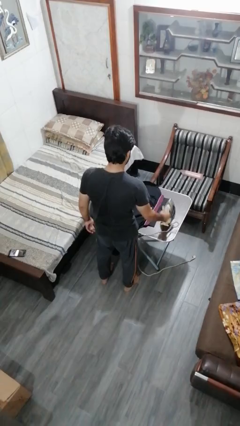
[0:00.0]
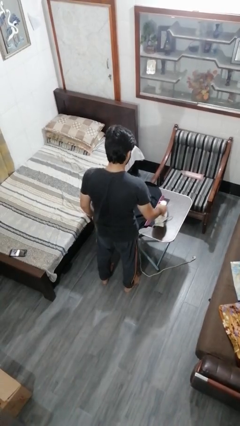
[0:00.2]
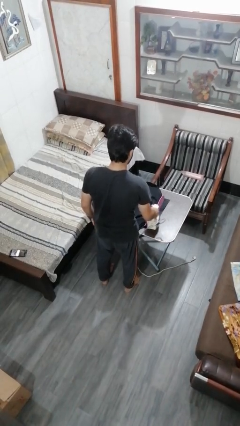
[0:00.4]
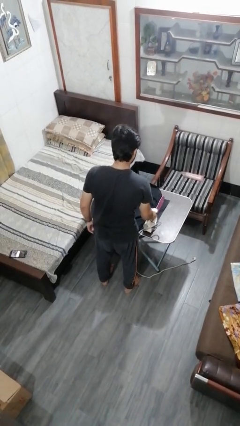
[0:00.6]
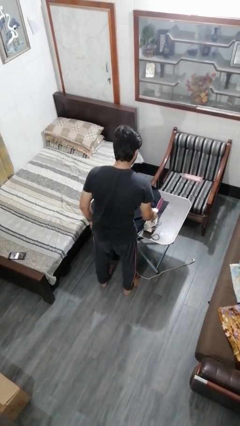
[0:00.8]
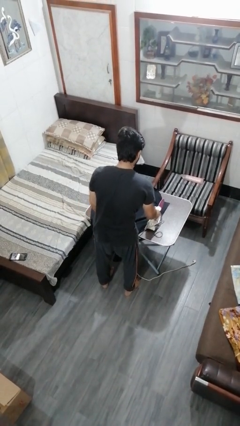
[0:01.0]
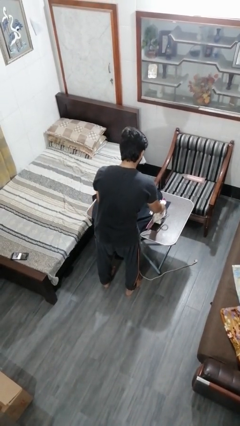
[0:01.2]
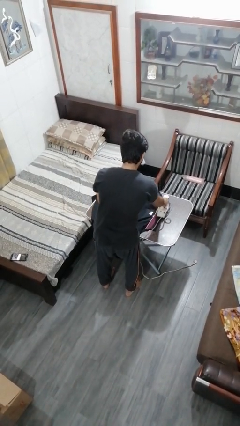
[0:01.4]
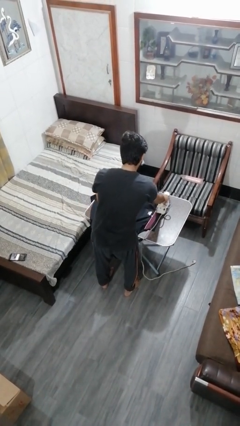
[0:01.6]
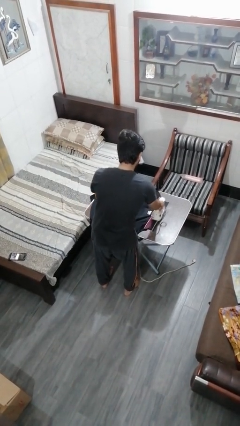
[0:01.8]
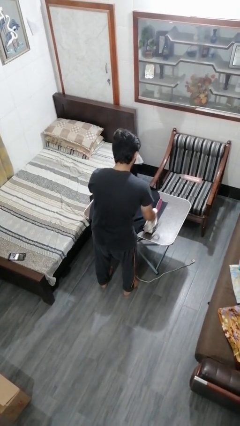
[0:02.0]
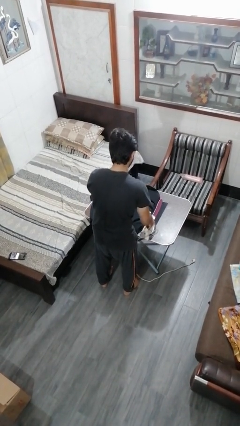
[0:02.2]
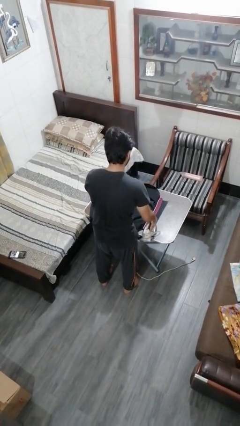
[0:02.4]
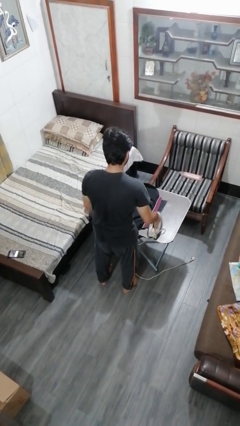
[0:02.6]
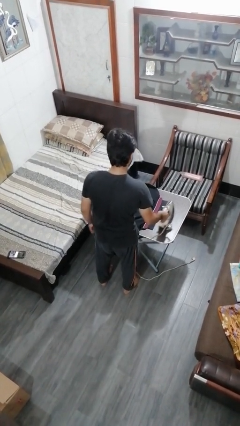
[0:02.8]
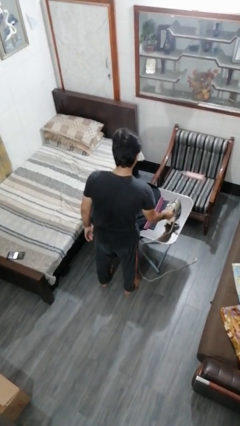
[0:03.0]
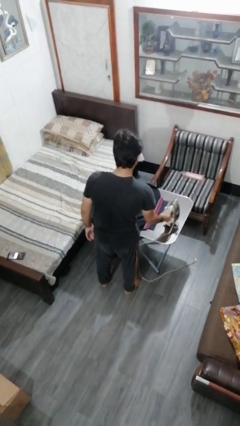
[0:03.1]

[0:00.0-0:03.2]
person irons clothes

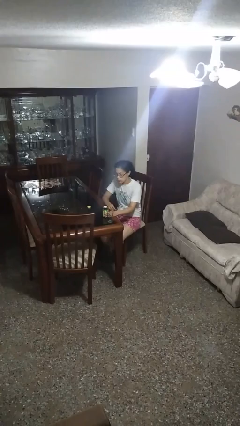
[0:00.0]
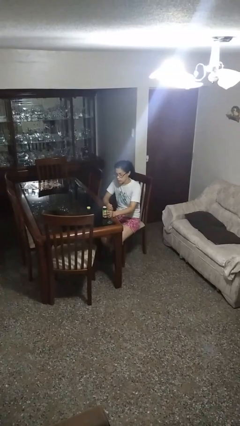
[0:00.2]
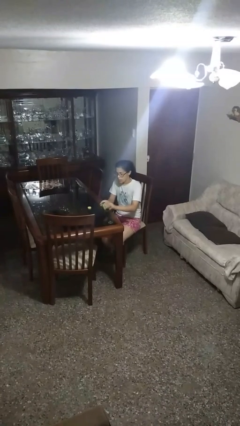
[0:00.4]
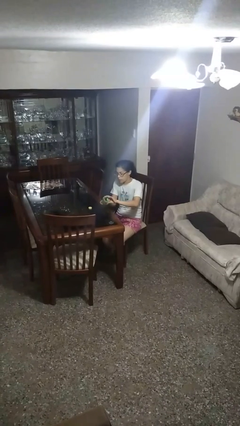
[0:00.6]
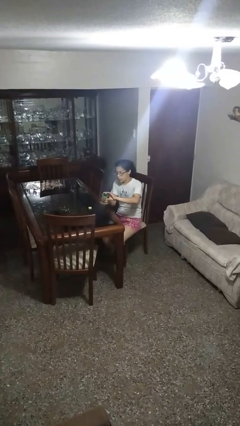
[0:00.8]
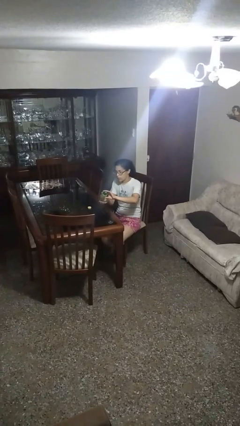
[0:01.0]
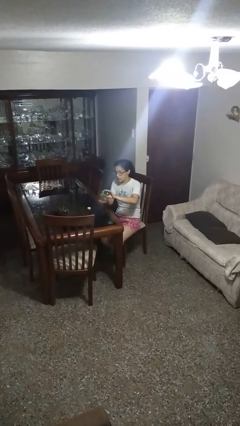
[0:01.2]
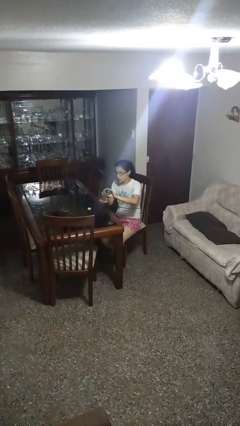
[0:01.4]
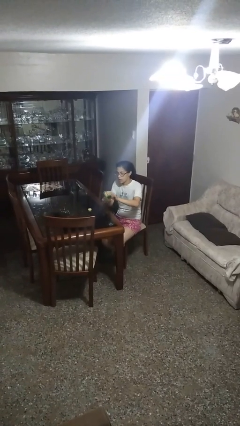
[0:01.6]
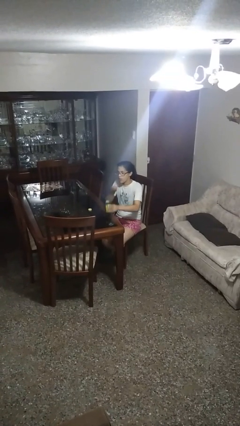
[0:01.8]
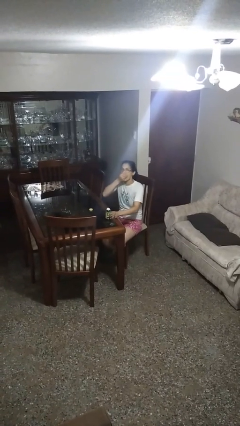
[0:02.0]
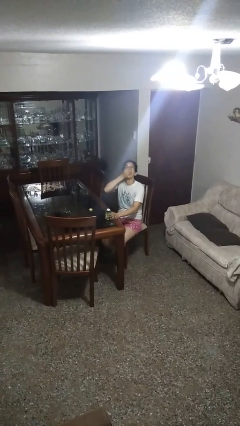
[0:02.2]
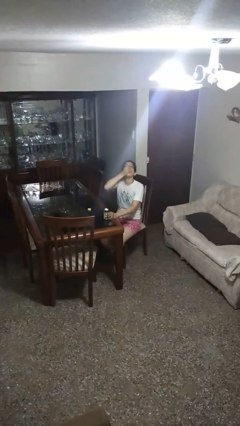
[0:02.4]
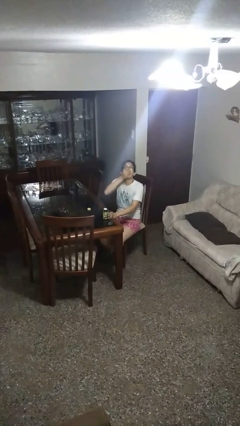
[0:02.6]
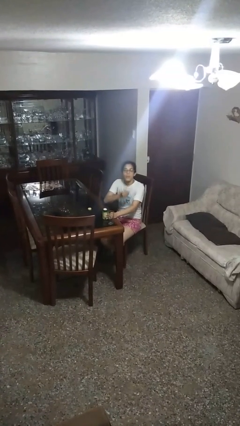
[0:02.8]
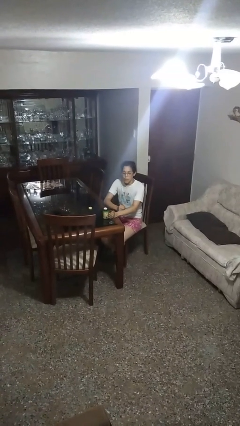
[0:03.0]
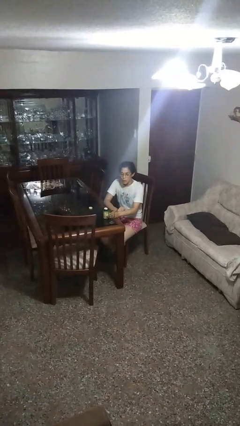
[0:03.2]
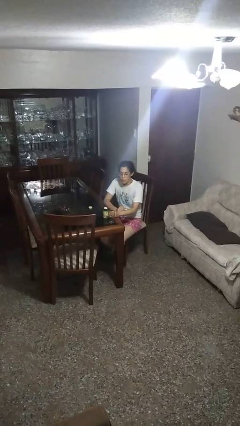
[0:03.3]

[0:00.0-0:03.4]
person takes medicine pills

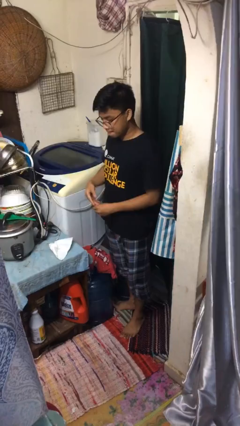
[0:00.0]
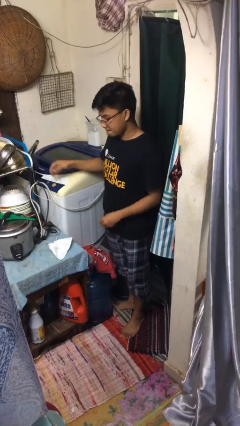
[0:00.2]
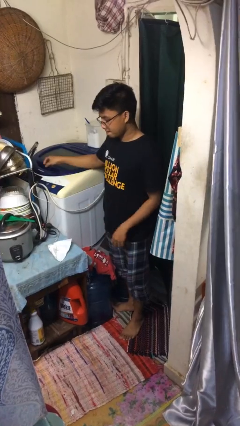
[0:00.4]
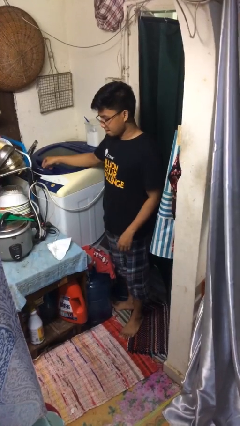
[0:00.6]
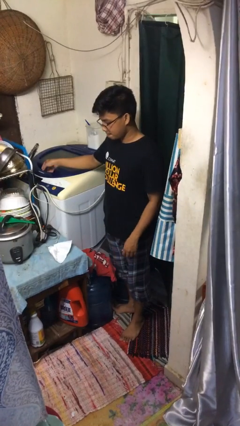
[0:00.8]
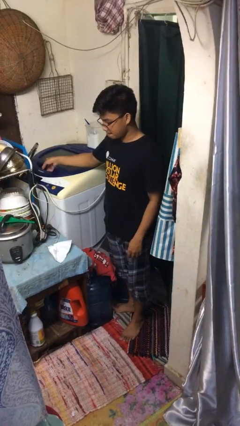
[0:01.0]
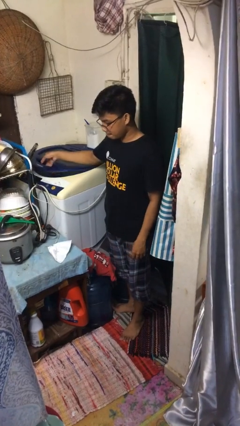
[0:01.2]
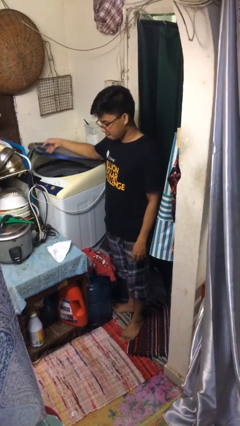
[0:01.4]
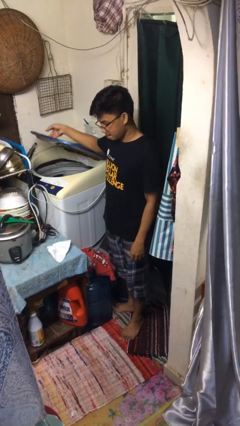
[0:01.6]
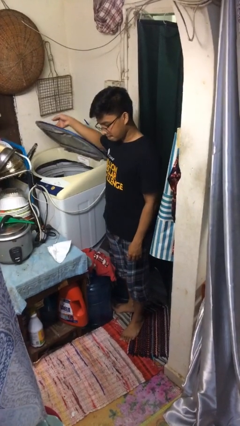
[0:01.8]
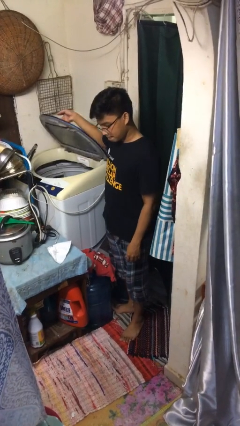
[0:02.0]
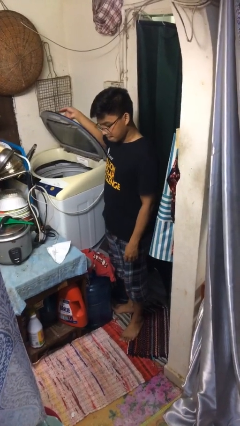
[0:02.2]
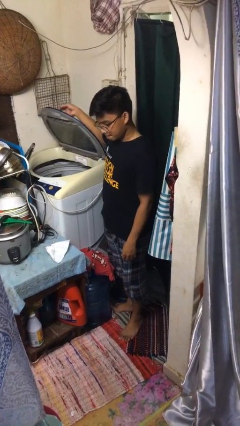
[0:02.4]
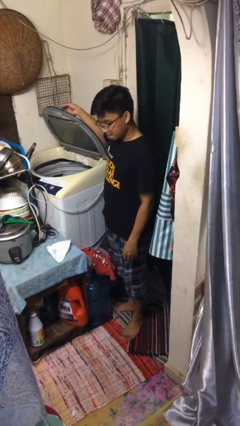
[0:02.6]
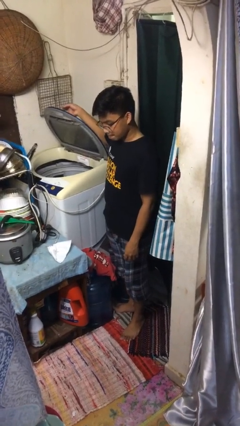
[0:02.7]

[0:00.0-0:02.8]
person opens clothes washer

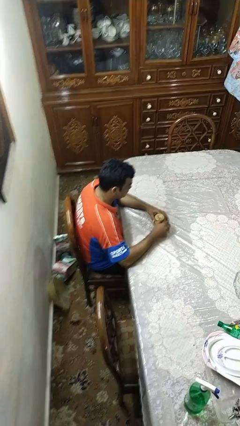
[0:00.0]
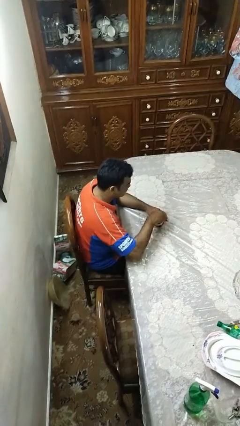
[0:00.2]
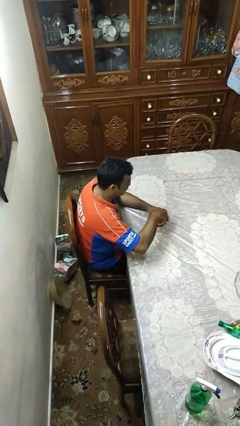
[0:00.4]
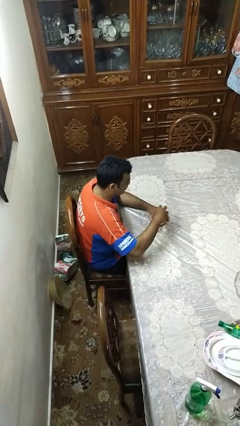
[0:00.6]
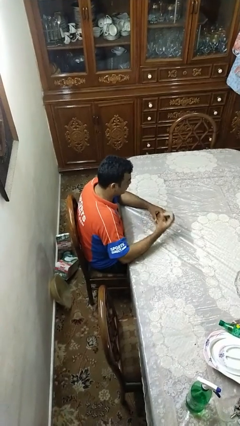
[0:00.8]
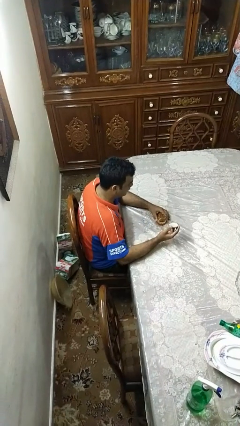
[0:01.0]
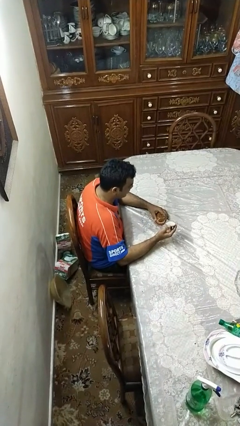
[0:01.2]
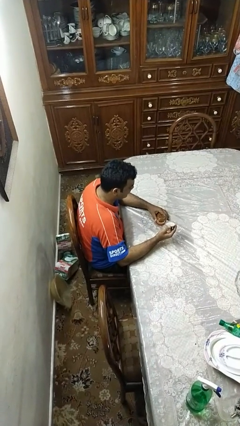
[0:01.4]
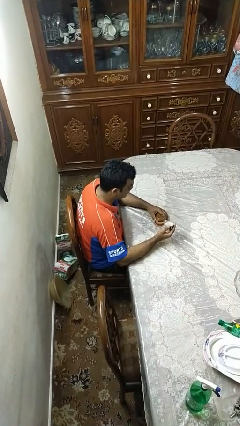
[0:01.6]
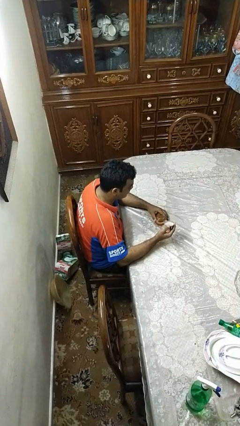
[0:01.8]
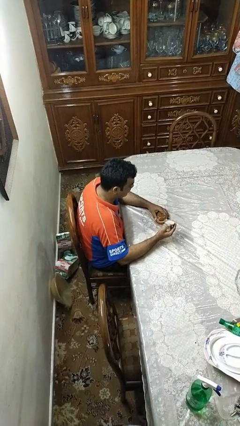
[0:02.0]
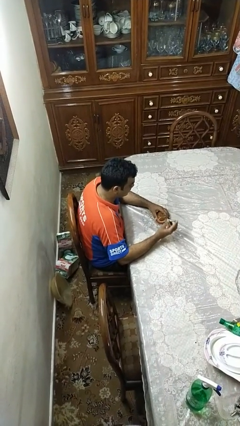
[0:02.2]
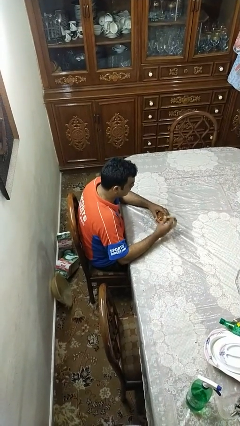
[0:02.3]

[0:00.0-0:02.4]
person opens jar

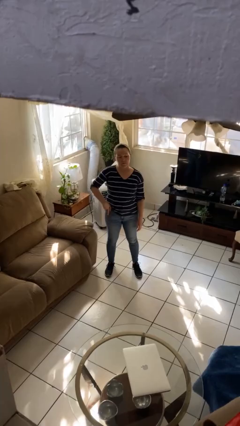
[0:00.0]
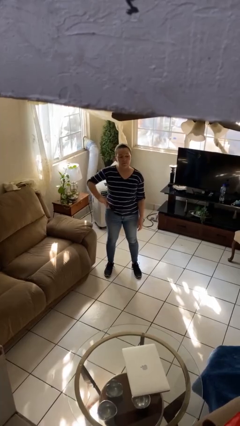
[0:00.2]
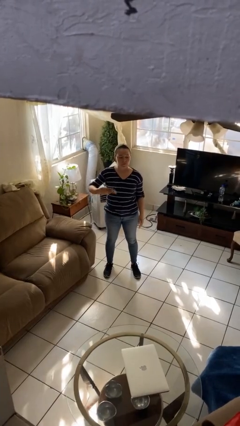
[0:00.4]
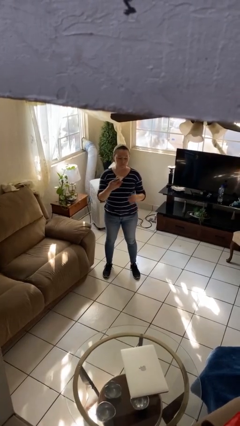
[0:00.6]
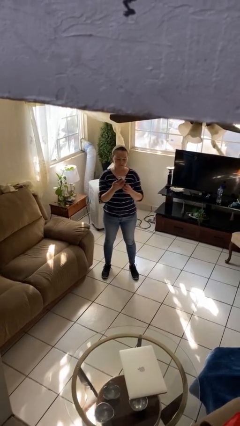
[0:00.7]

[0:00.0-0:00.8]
person takes phone from pocket

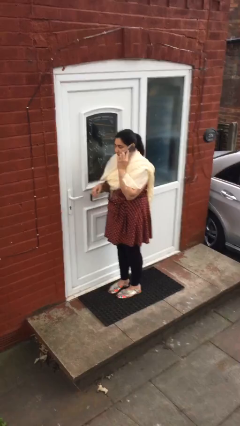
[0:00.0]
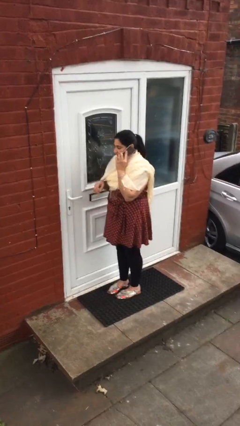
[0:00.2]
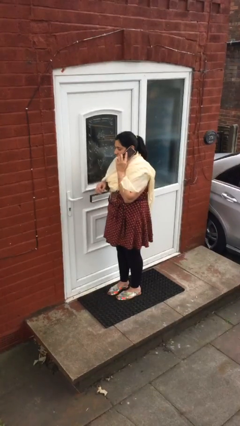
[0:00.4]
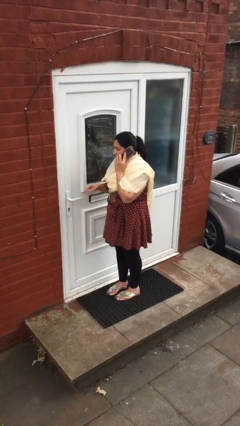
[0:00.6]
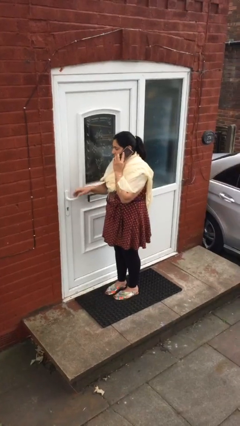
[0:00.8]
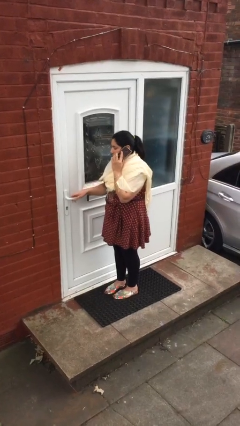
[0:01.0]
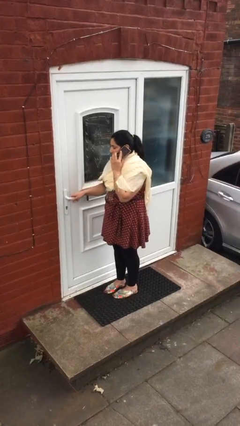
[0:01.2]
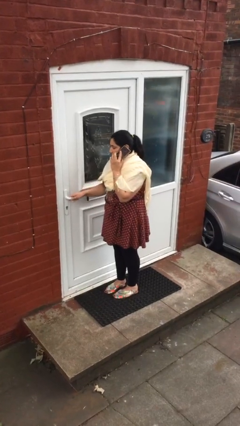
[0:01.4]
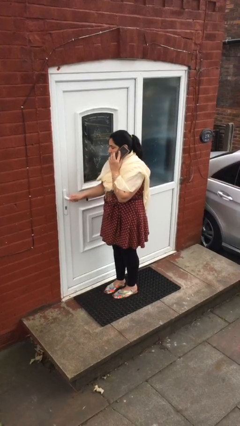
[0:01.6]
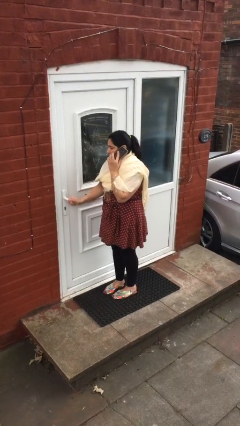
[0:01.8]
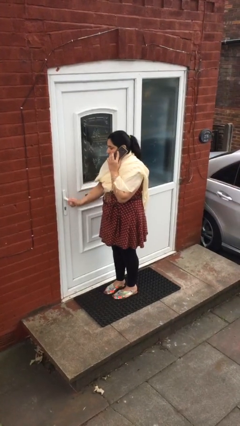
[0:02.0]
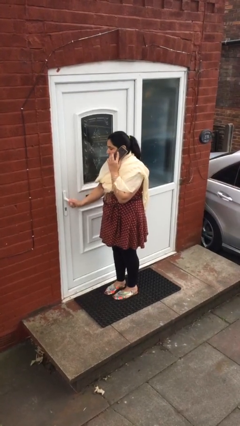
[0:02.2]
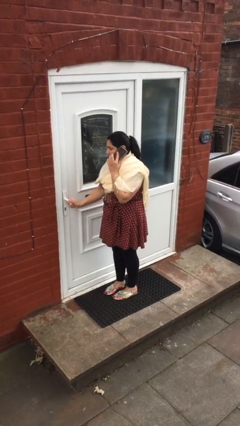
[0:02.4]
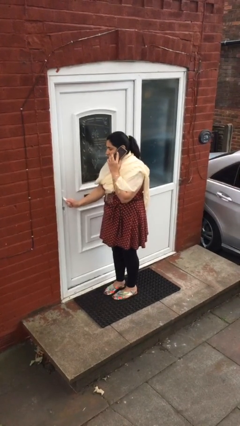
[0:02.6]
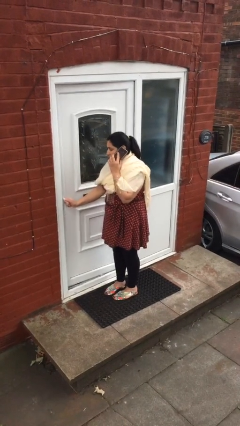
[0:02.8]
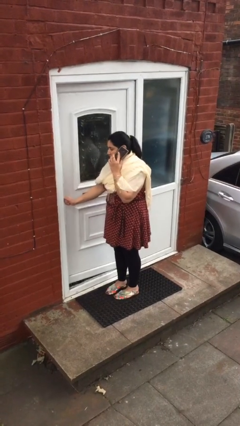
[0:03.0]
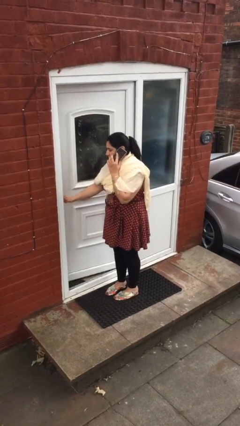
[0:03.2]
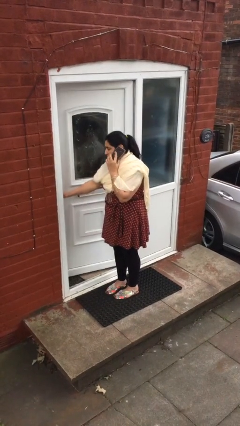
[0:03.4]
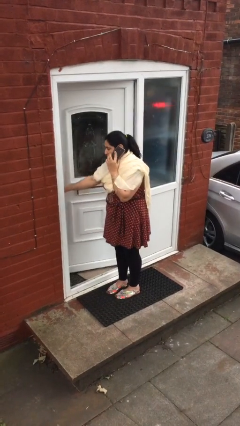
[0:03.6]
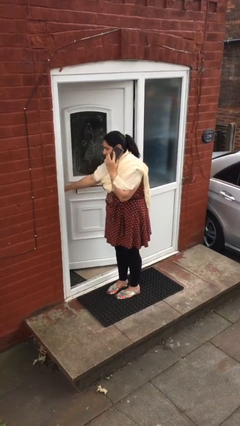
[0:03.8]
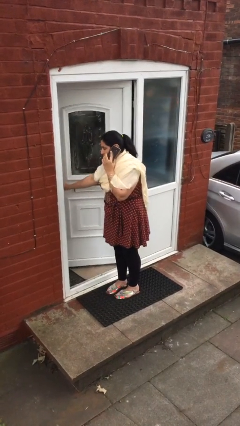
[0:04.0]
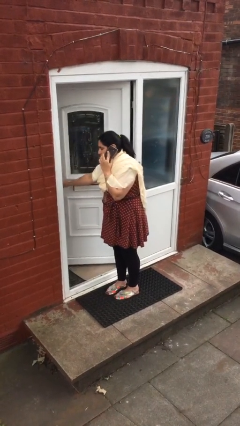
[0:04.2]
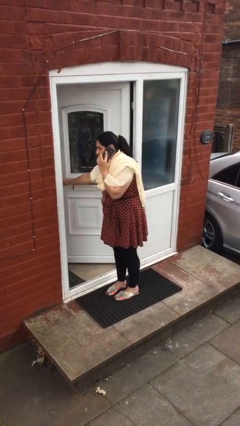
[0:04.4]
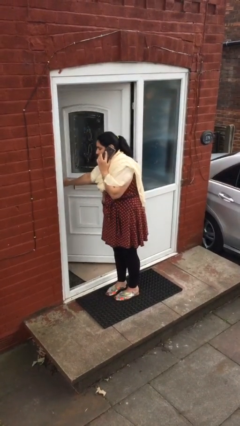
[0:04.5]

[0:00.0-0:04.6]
person opens facility door

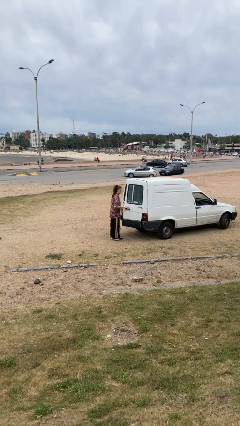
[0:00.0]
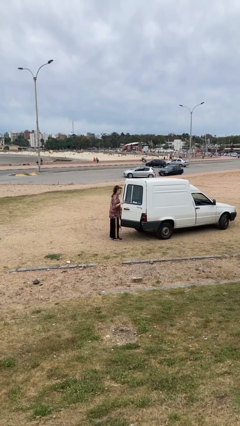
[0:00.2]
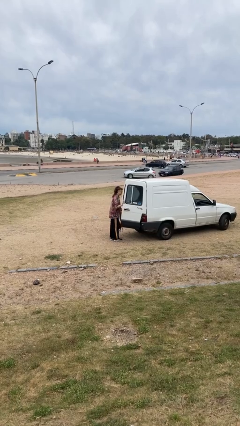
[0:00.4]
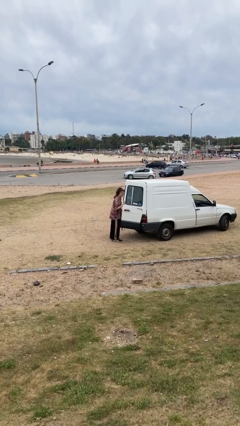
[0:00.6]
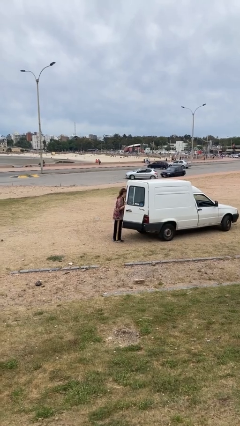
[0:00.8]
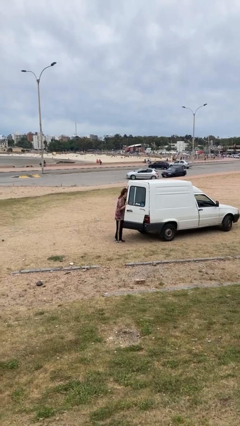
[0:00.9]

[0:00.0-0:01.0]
person opens car door
